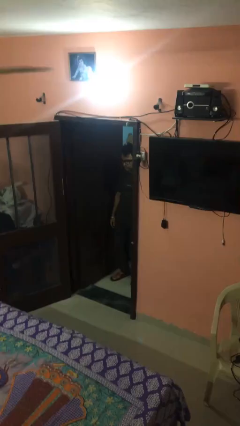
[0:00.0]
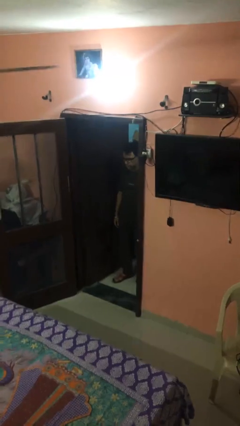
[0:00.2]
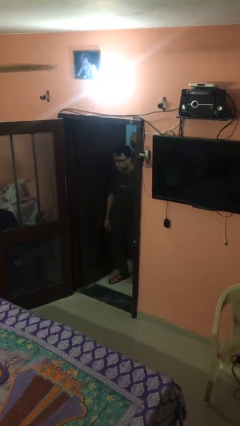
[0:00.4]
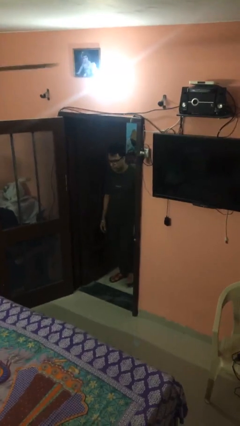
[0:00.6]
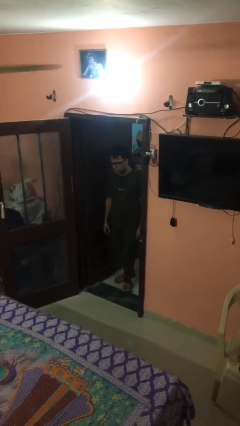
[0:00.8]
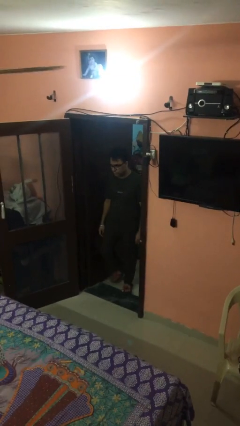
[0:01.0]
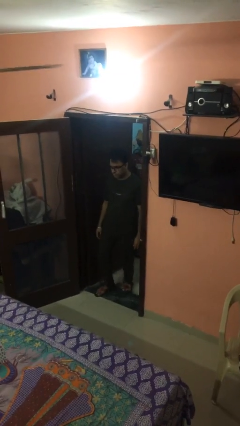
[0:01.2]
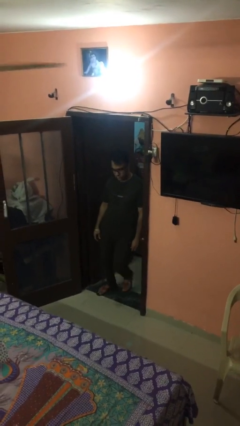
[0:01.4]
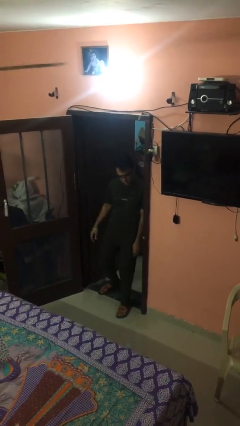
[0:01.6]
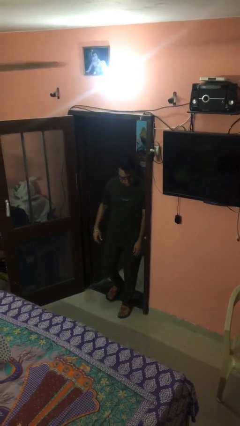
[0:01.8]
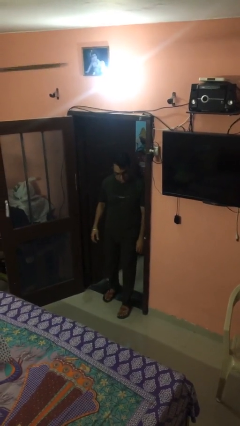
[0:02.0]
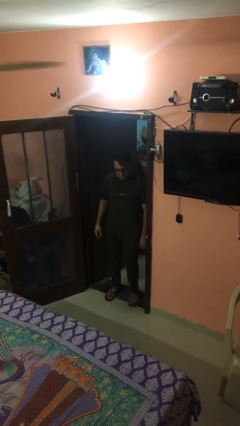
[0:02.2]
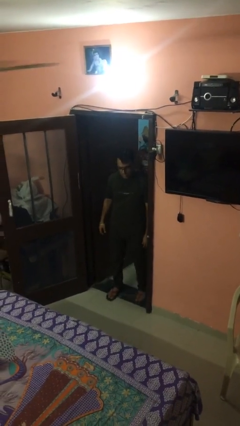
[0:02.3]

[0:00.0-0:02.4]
person bumps into wall

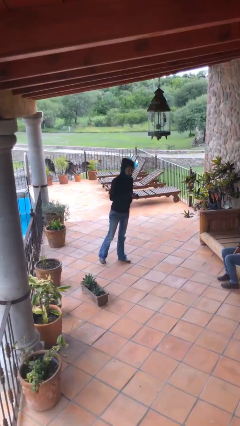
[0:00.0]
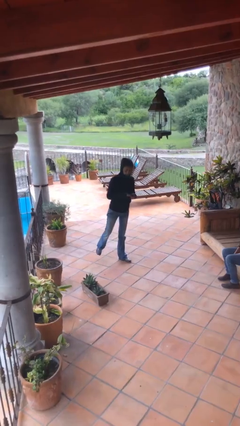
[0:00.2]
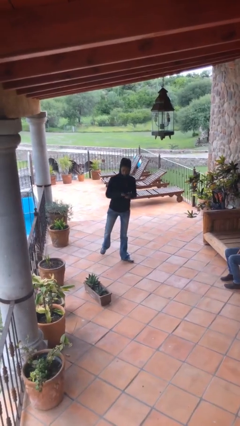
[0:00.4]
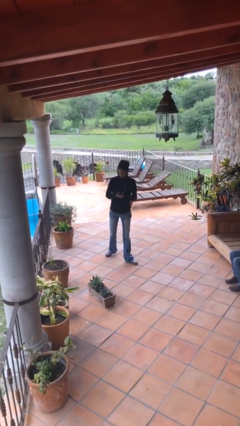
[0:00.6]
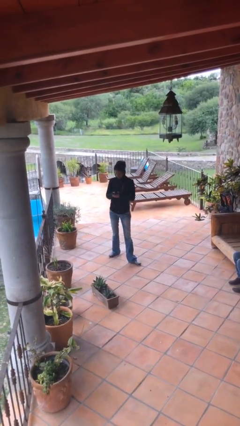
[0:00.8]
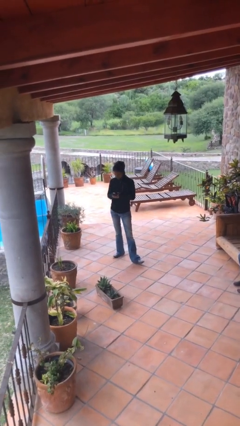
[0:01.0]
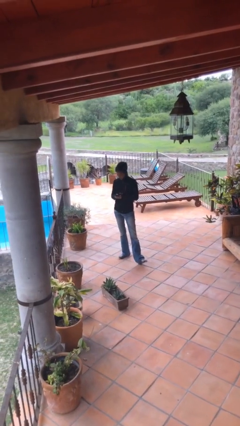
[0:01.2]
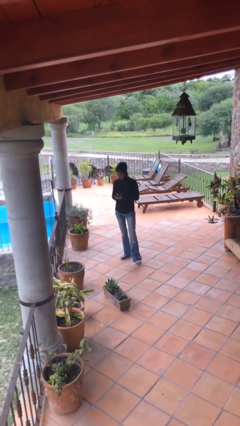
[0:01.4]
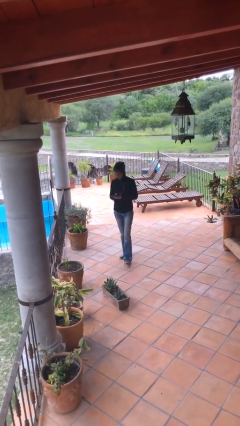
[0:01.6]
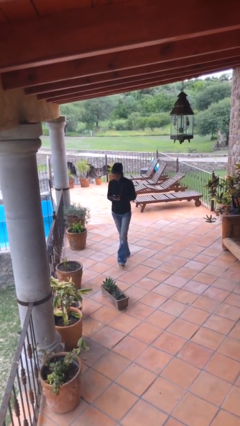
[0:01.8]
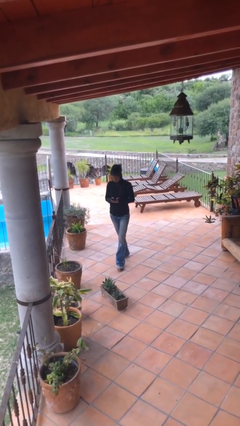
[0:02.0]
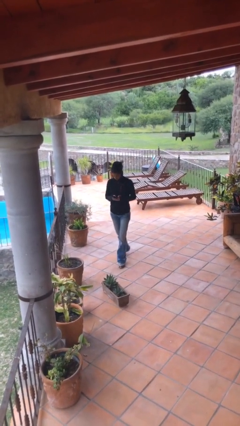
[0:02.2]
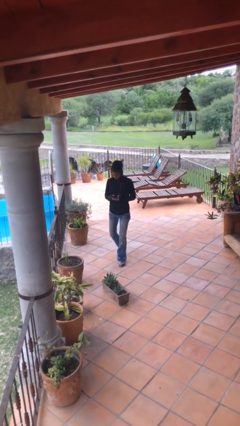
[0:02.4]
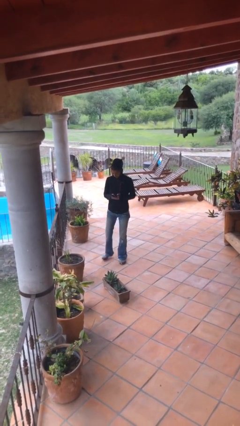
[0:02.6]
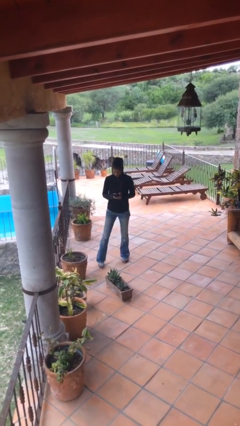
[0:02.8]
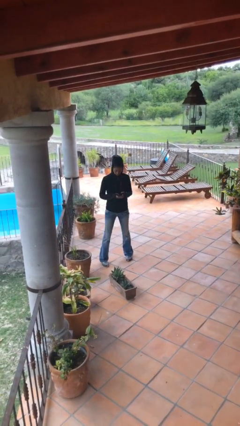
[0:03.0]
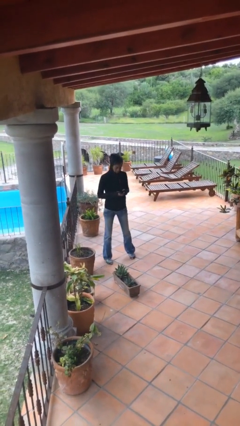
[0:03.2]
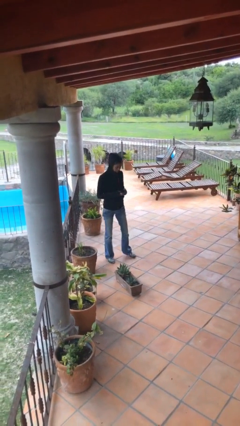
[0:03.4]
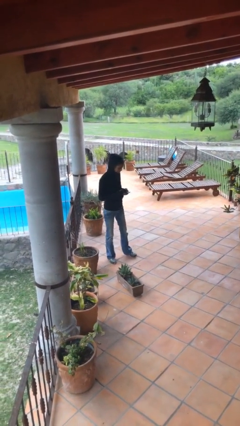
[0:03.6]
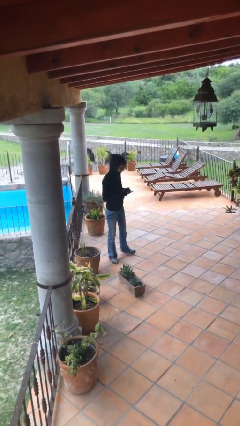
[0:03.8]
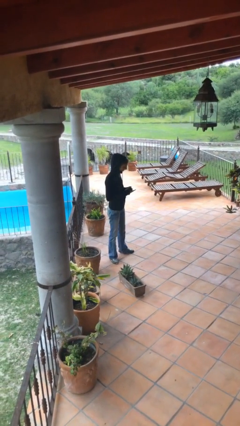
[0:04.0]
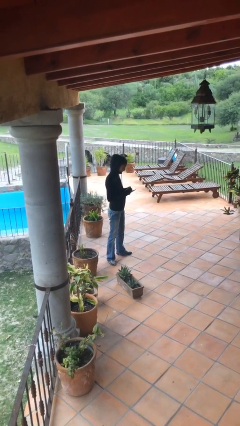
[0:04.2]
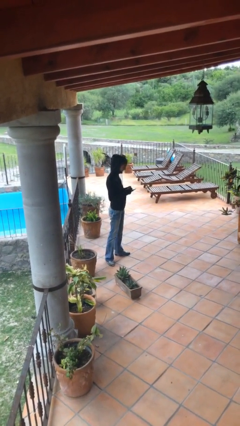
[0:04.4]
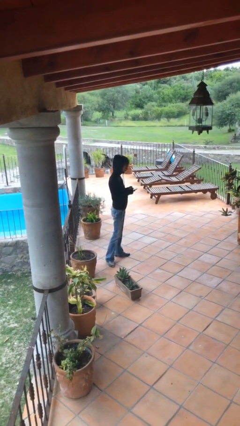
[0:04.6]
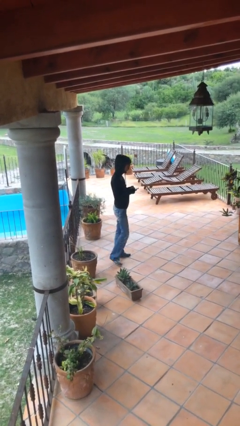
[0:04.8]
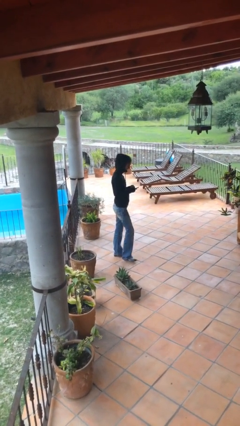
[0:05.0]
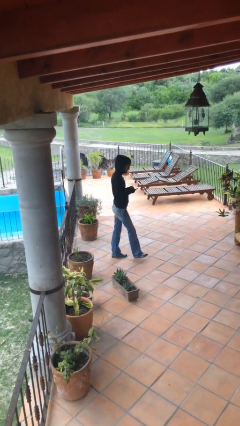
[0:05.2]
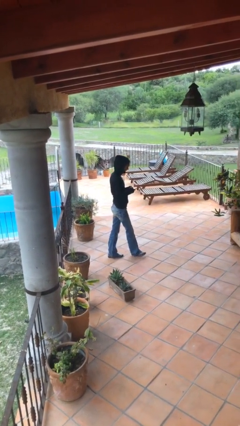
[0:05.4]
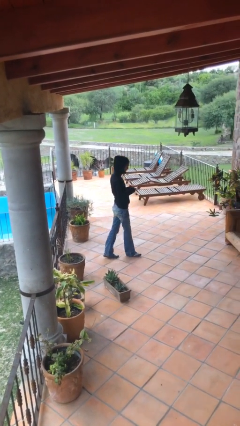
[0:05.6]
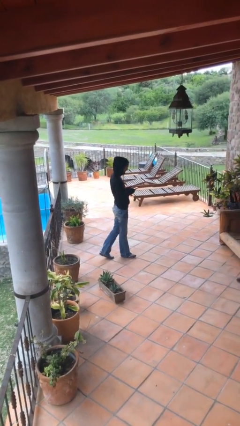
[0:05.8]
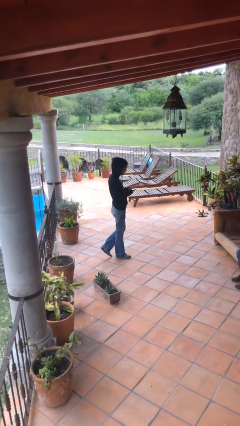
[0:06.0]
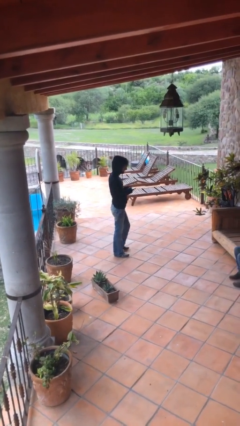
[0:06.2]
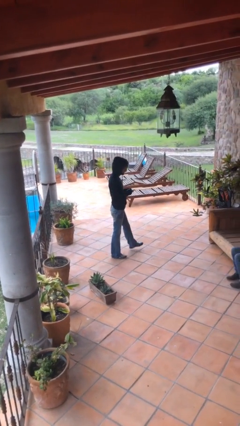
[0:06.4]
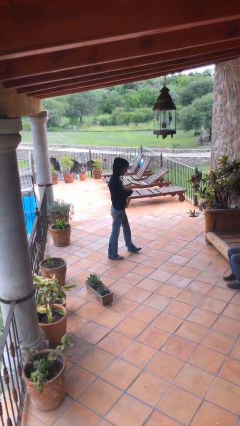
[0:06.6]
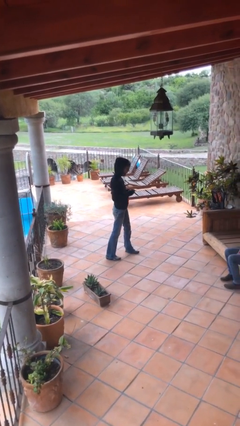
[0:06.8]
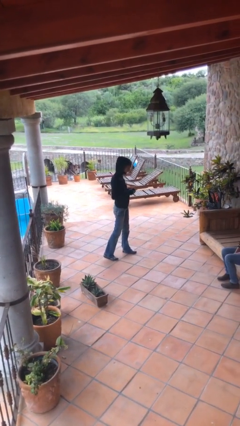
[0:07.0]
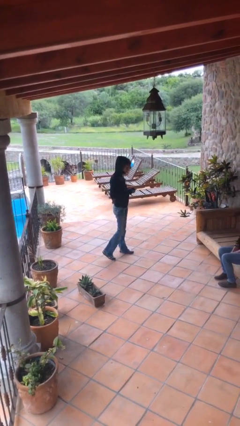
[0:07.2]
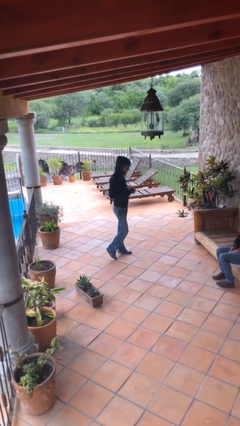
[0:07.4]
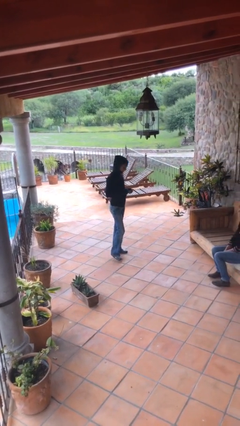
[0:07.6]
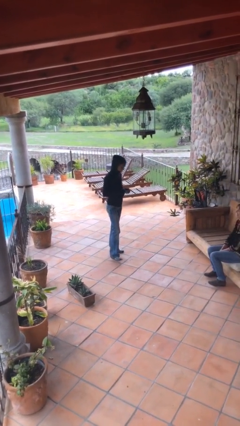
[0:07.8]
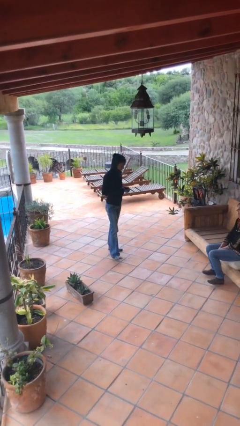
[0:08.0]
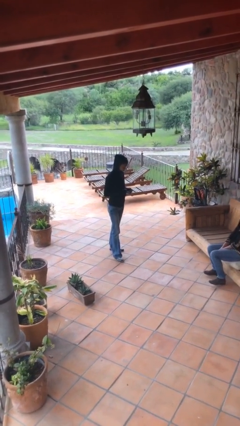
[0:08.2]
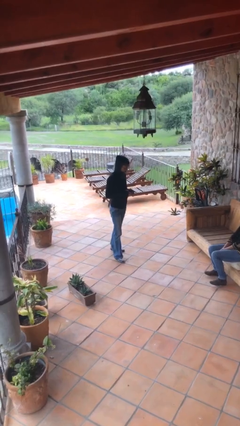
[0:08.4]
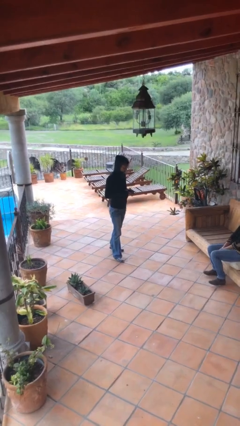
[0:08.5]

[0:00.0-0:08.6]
person texts on phone

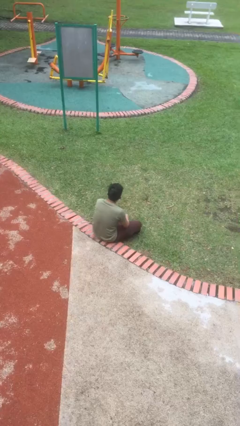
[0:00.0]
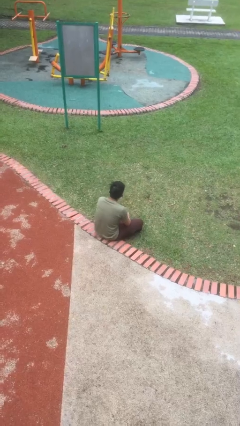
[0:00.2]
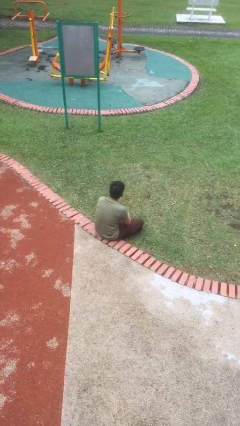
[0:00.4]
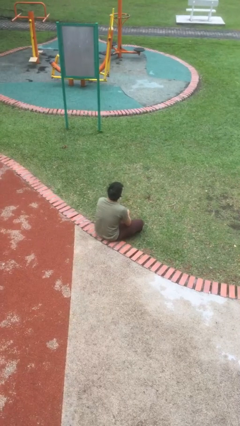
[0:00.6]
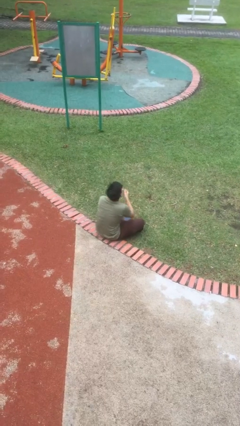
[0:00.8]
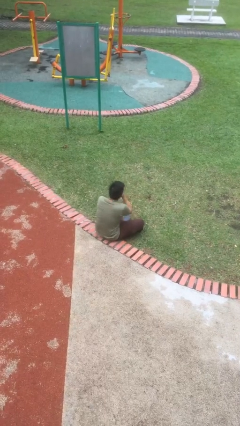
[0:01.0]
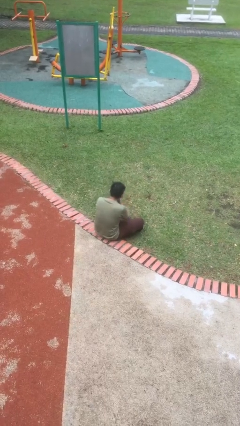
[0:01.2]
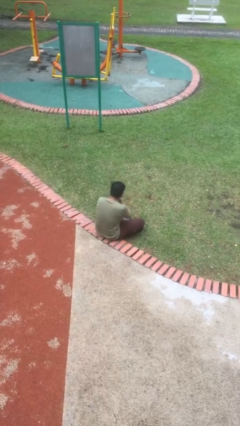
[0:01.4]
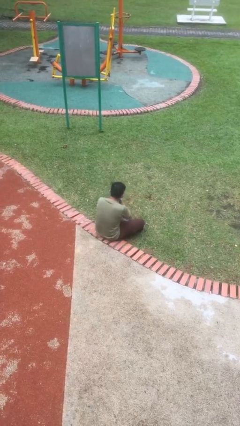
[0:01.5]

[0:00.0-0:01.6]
person sneezes into hand

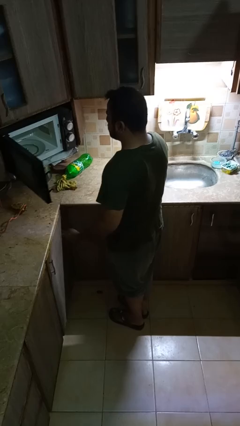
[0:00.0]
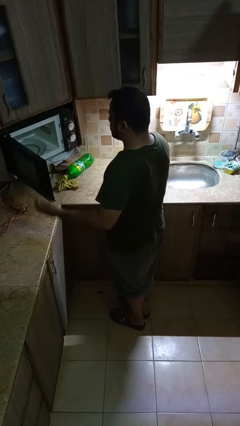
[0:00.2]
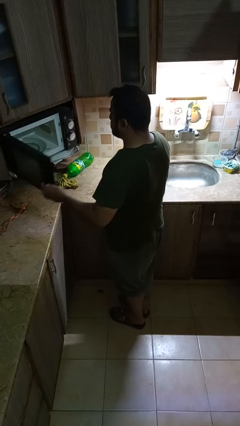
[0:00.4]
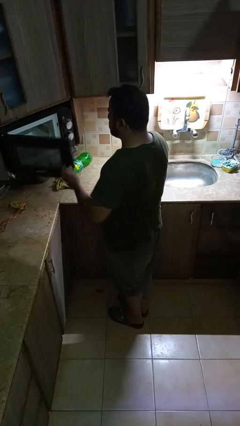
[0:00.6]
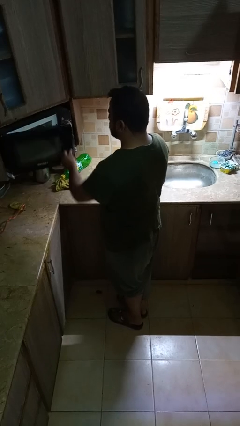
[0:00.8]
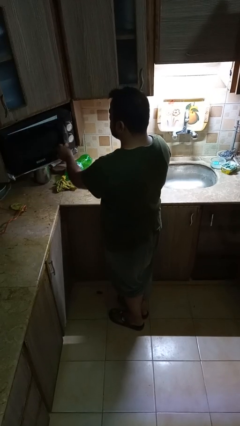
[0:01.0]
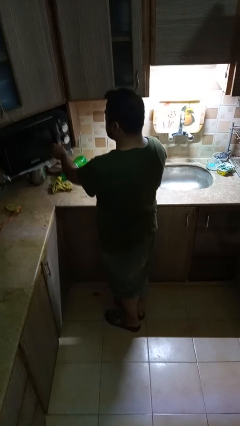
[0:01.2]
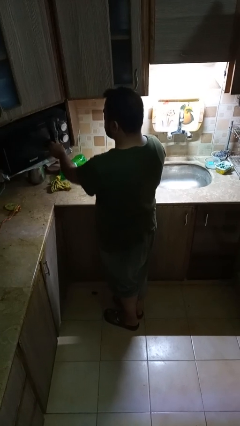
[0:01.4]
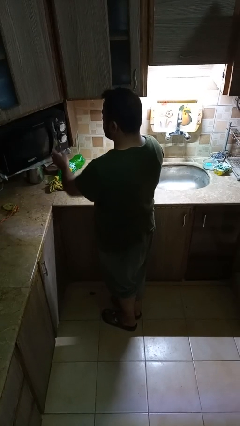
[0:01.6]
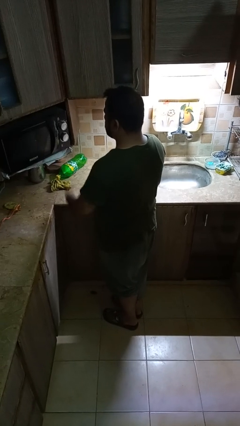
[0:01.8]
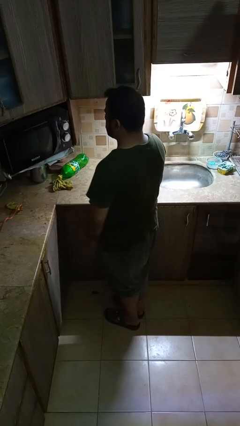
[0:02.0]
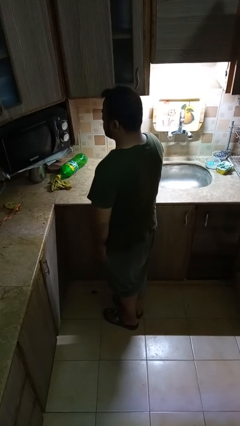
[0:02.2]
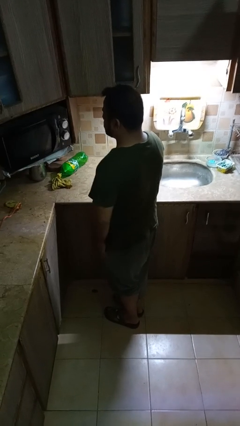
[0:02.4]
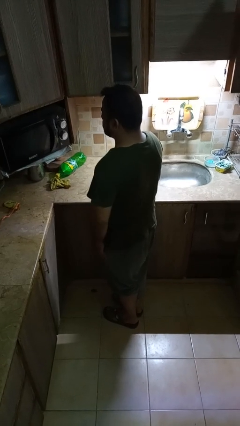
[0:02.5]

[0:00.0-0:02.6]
person closes oven door

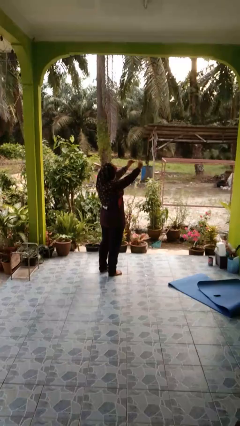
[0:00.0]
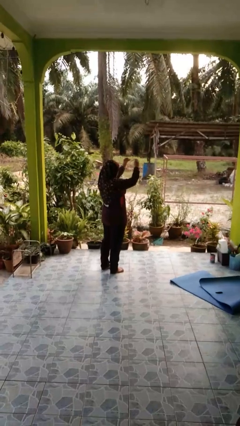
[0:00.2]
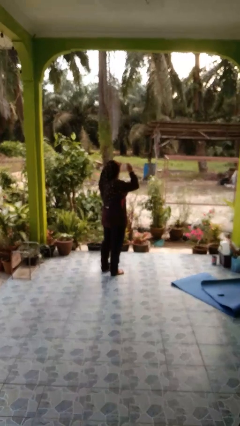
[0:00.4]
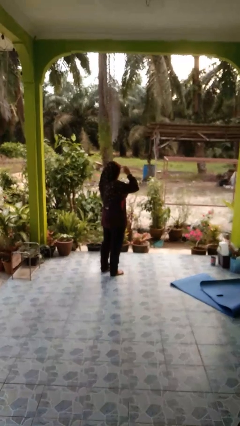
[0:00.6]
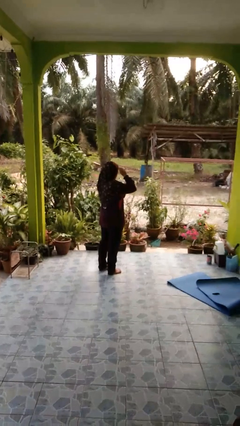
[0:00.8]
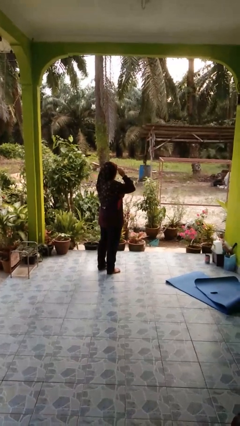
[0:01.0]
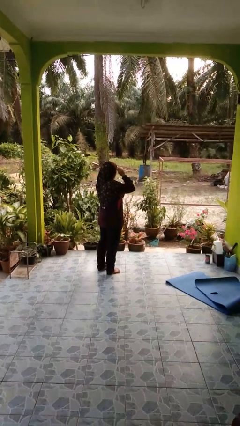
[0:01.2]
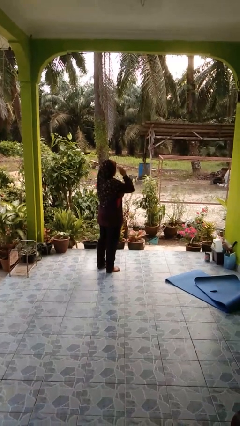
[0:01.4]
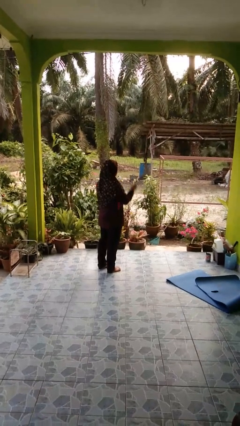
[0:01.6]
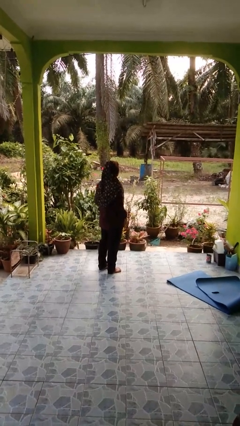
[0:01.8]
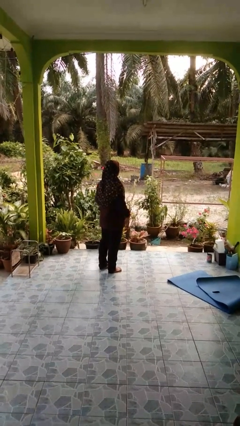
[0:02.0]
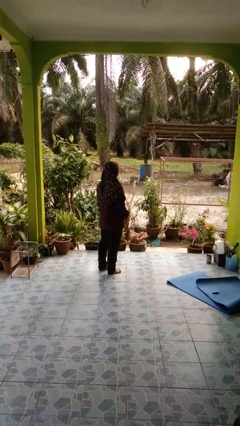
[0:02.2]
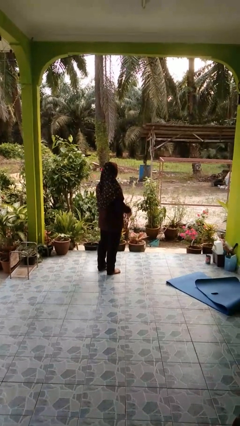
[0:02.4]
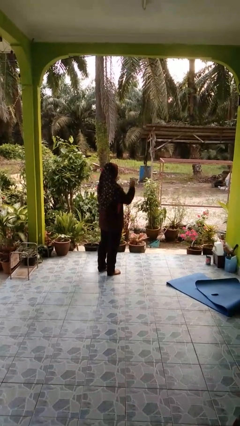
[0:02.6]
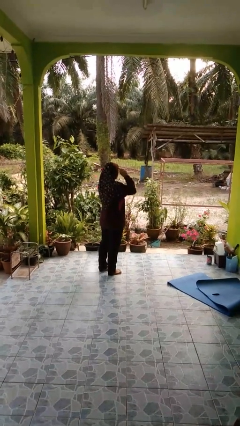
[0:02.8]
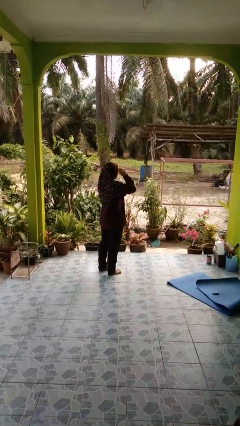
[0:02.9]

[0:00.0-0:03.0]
person puts on glasses
